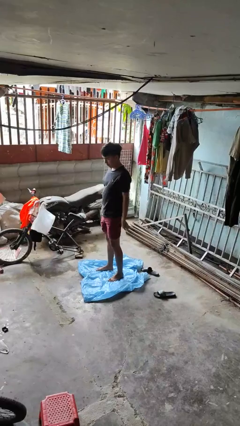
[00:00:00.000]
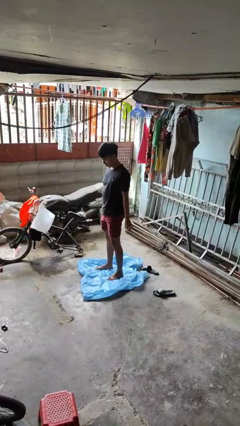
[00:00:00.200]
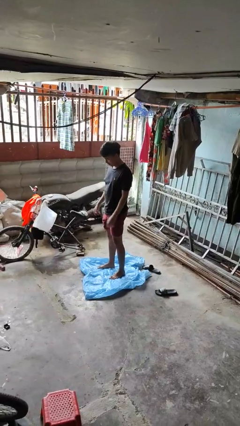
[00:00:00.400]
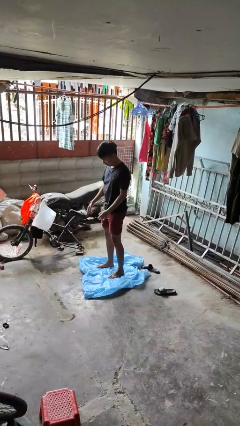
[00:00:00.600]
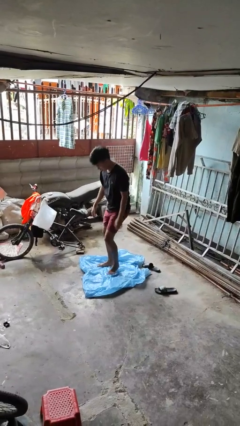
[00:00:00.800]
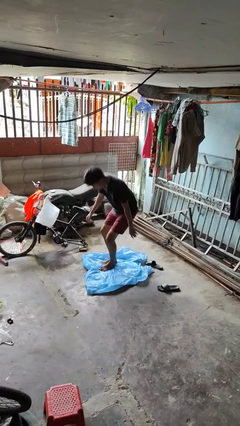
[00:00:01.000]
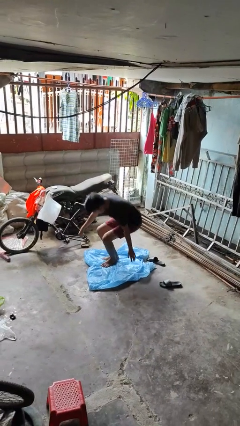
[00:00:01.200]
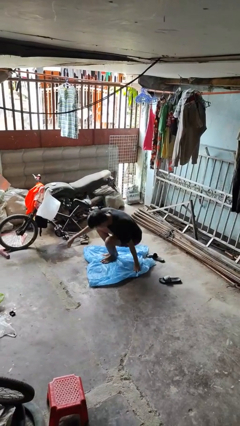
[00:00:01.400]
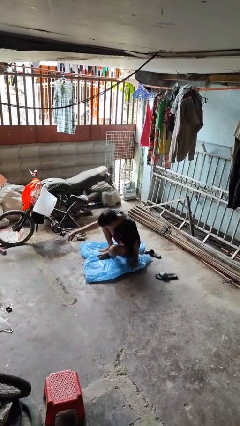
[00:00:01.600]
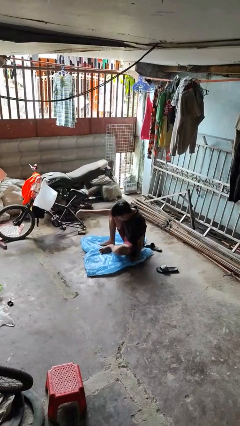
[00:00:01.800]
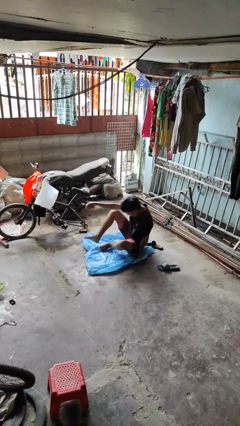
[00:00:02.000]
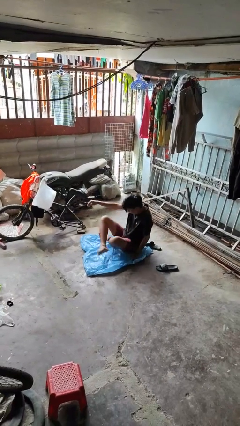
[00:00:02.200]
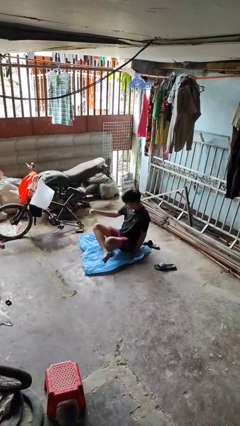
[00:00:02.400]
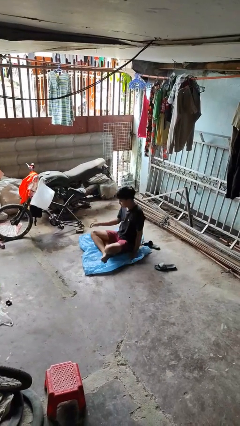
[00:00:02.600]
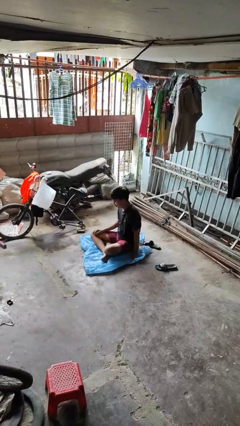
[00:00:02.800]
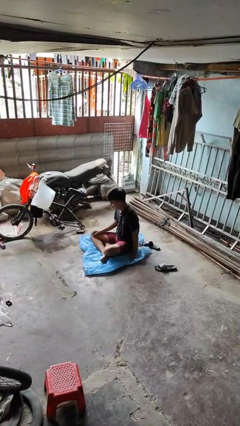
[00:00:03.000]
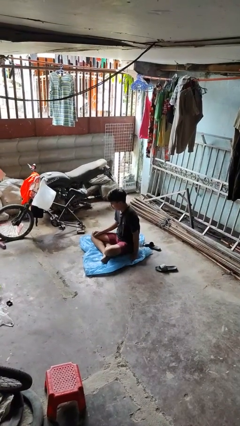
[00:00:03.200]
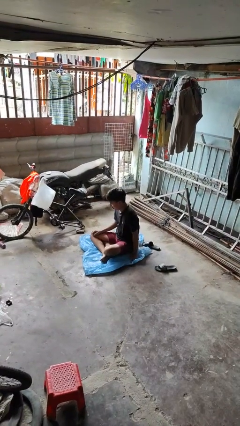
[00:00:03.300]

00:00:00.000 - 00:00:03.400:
person sits crisscross

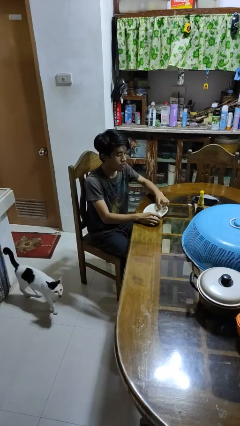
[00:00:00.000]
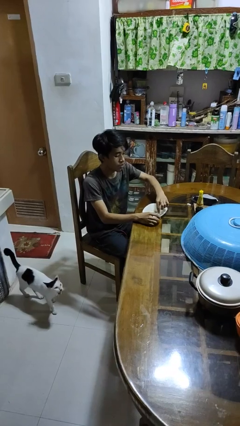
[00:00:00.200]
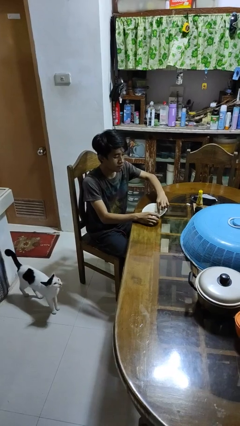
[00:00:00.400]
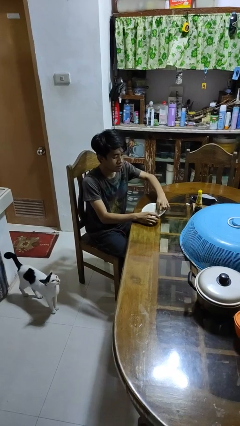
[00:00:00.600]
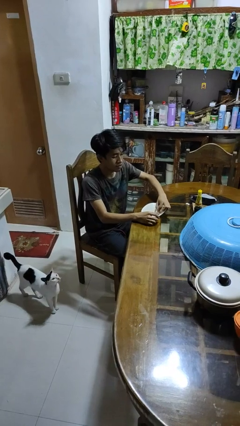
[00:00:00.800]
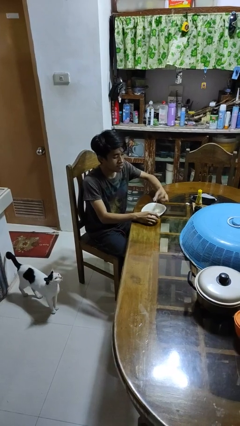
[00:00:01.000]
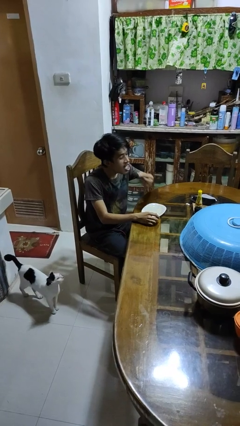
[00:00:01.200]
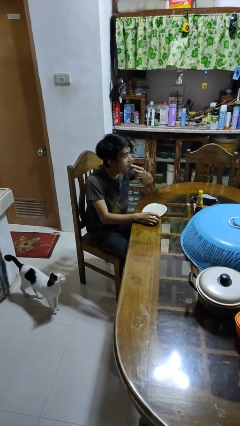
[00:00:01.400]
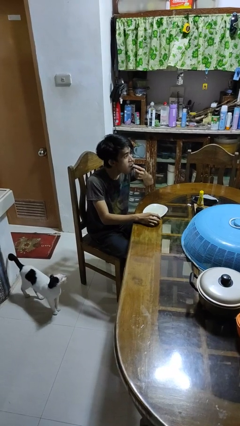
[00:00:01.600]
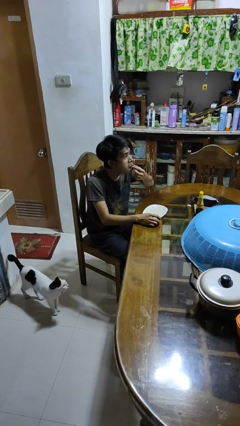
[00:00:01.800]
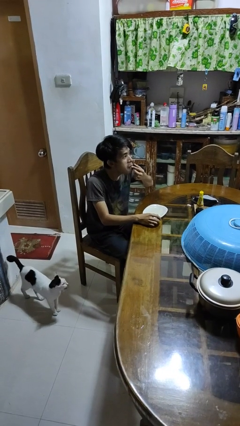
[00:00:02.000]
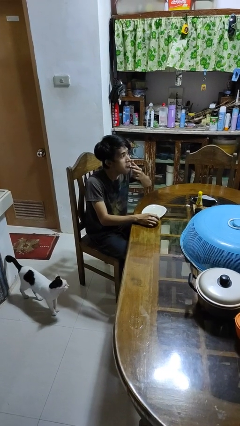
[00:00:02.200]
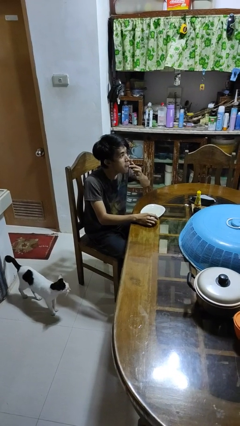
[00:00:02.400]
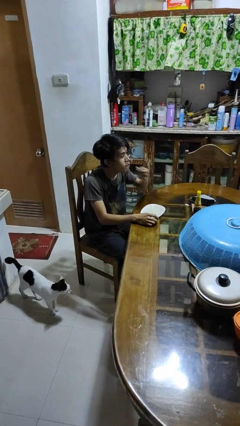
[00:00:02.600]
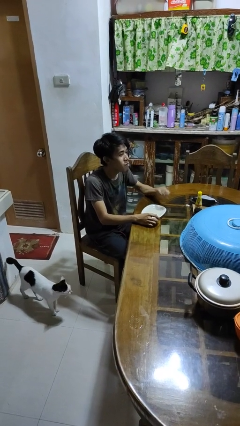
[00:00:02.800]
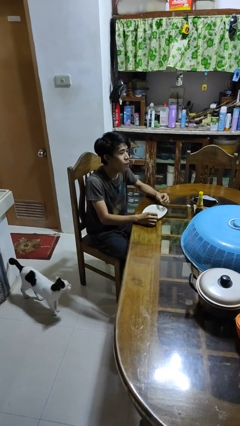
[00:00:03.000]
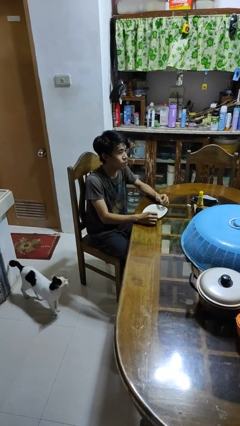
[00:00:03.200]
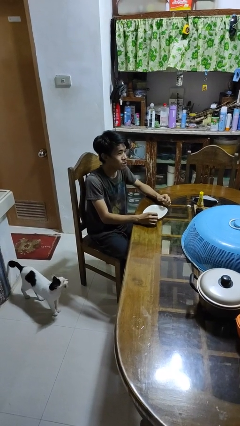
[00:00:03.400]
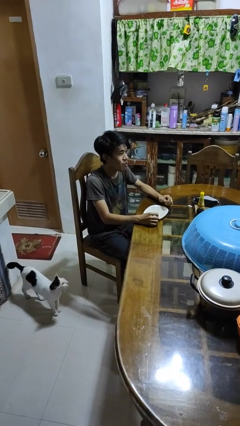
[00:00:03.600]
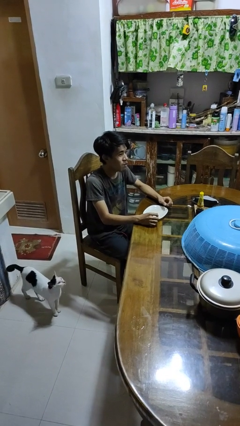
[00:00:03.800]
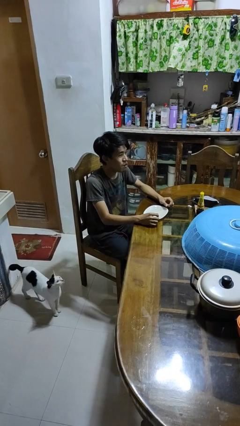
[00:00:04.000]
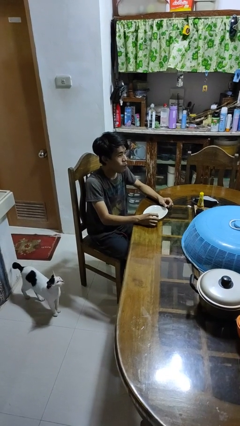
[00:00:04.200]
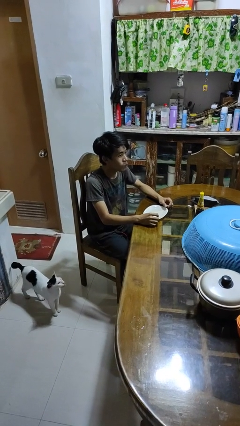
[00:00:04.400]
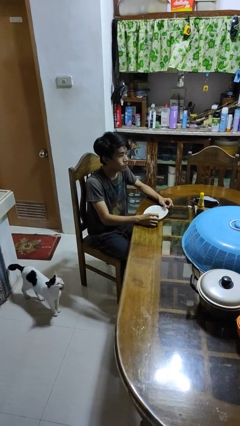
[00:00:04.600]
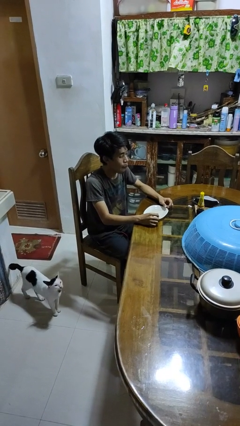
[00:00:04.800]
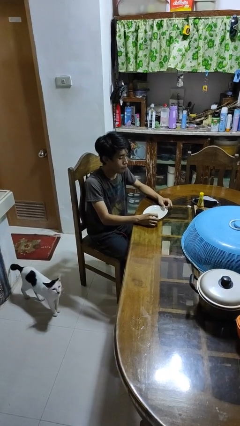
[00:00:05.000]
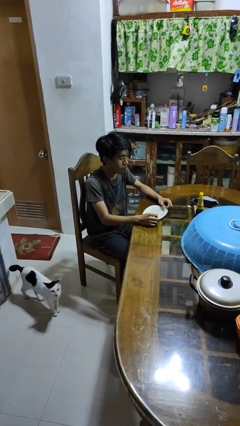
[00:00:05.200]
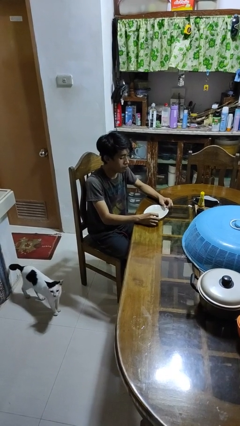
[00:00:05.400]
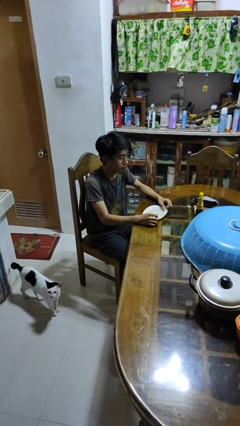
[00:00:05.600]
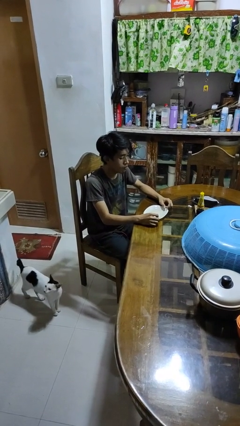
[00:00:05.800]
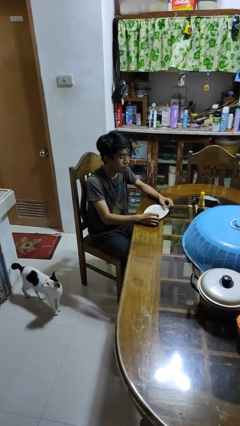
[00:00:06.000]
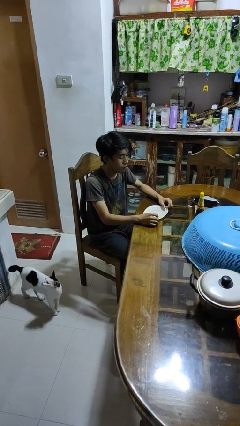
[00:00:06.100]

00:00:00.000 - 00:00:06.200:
person eats with hands

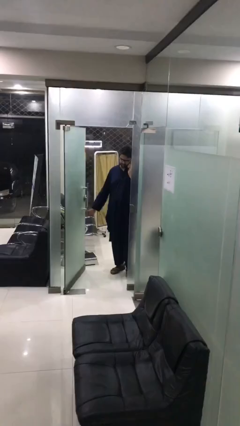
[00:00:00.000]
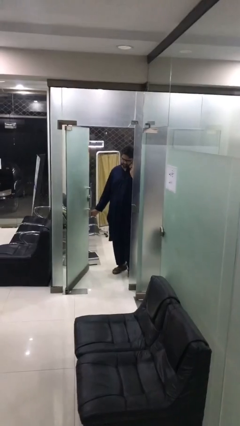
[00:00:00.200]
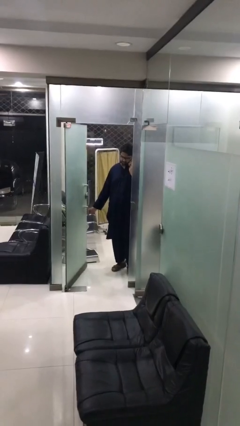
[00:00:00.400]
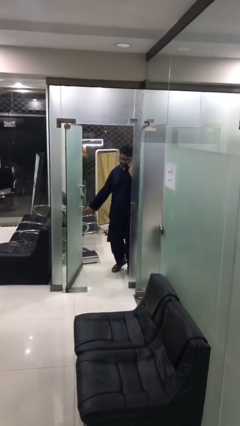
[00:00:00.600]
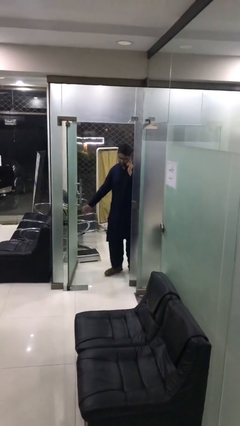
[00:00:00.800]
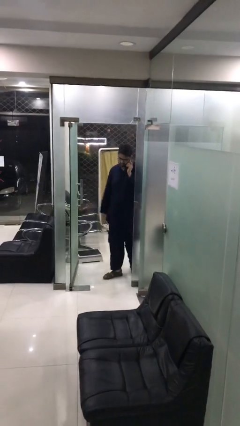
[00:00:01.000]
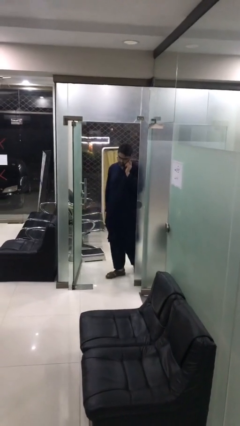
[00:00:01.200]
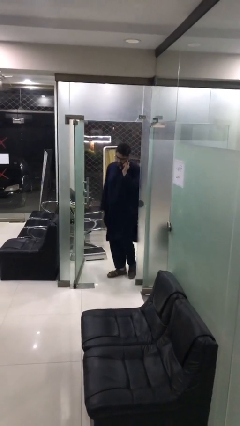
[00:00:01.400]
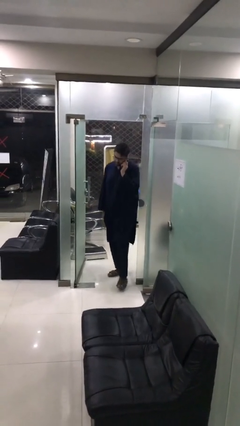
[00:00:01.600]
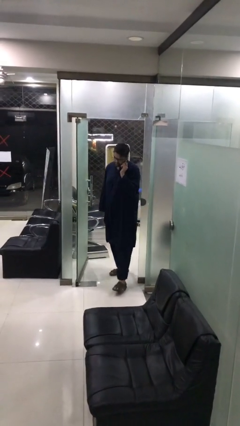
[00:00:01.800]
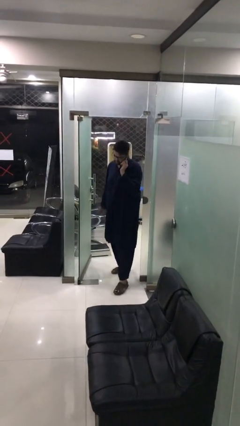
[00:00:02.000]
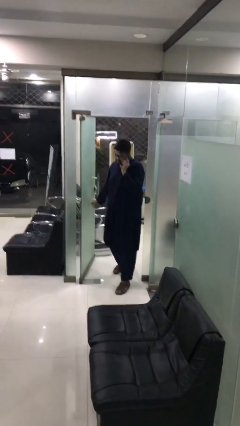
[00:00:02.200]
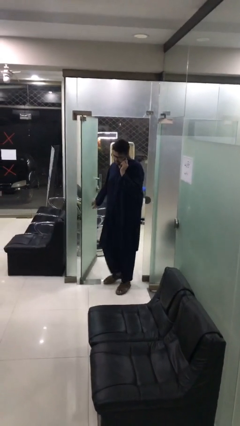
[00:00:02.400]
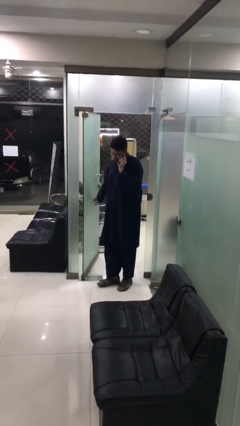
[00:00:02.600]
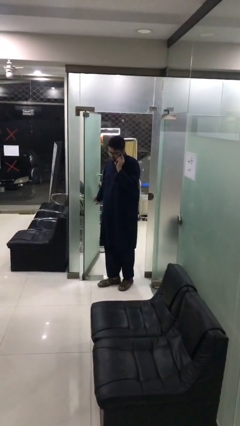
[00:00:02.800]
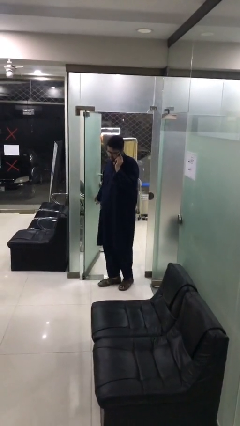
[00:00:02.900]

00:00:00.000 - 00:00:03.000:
person enters scene through structure

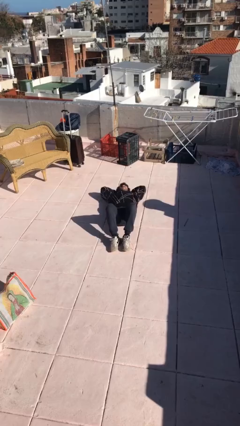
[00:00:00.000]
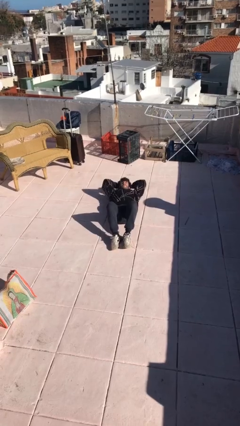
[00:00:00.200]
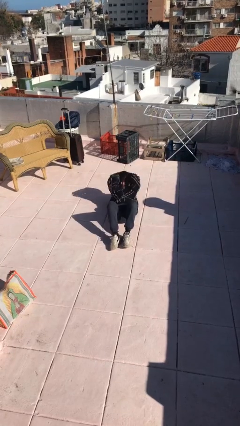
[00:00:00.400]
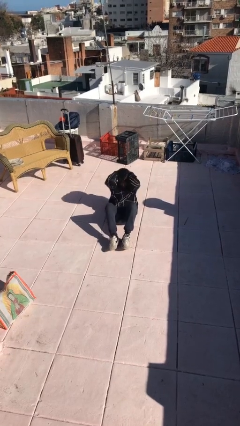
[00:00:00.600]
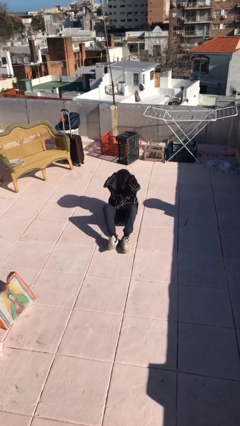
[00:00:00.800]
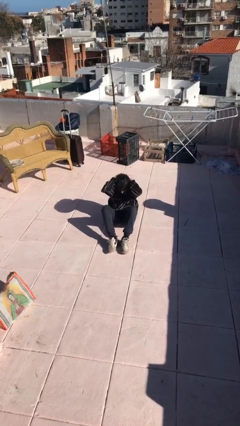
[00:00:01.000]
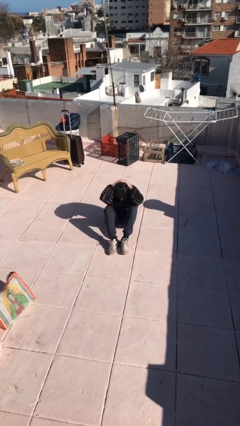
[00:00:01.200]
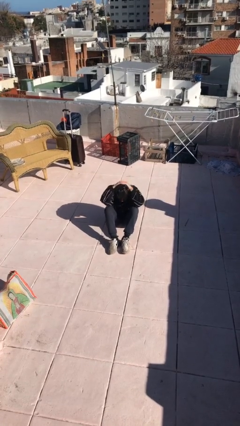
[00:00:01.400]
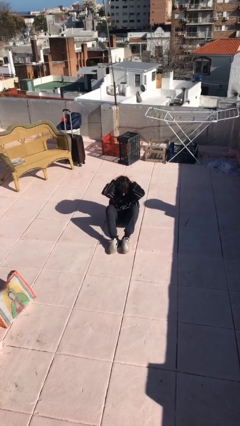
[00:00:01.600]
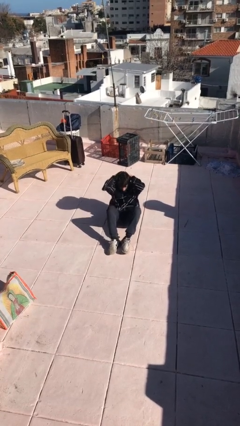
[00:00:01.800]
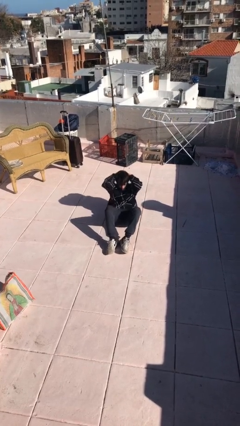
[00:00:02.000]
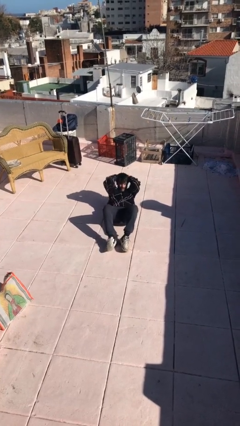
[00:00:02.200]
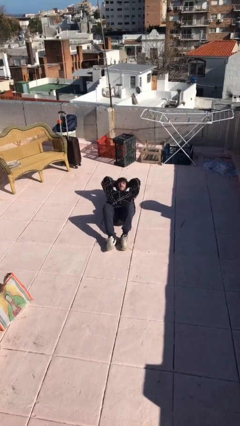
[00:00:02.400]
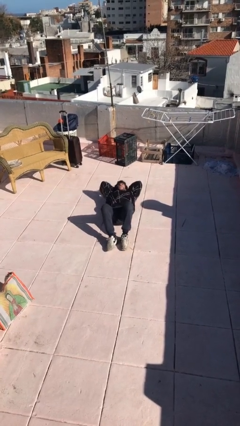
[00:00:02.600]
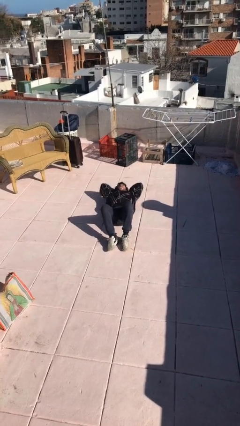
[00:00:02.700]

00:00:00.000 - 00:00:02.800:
person exercises with situp

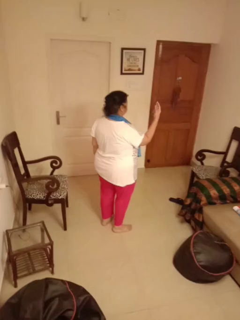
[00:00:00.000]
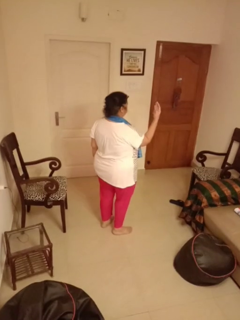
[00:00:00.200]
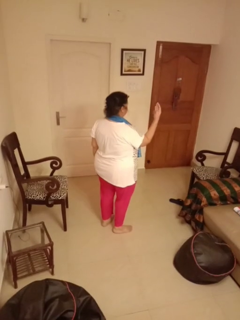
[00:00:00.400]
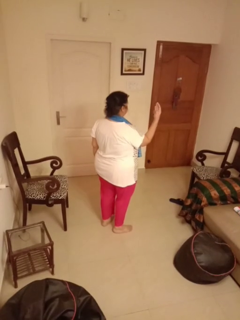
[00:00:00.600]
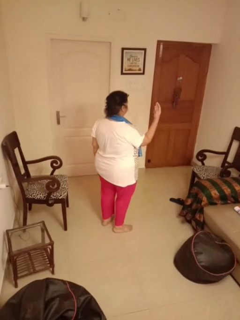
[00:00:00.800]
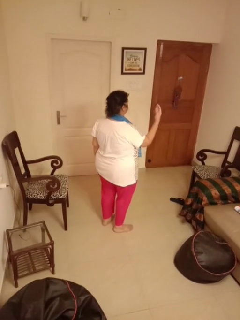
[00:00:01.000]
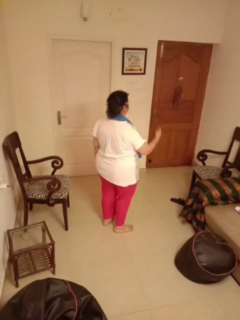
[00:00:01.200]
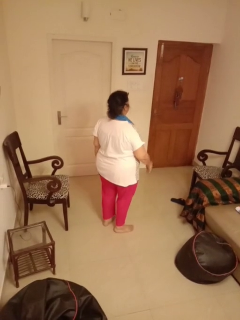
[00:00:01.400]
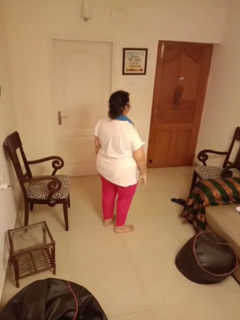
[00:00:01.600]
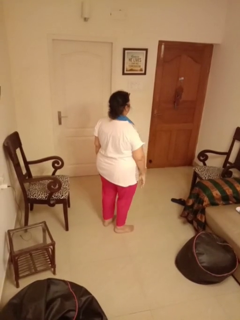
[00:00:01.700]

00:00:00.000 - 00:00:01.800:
person gestures number four

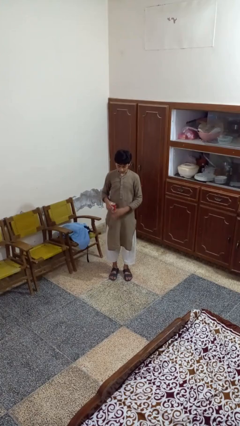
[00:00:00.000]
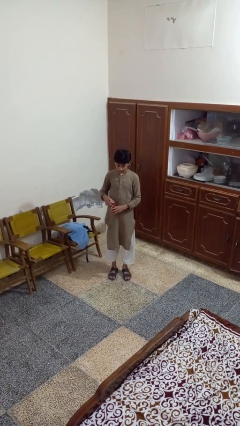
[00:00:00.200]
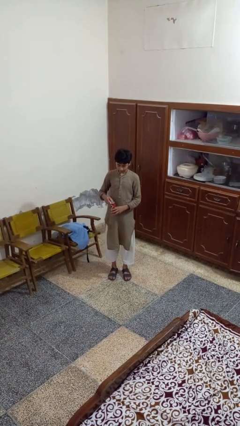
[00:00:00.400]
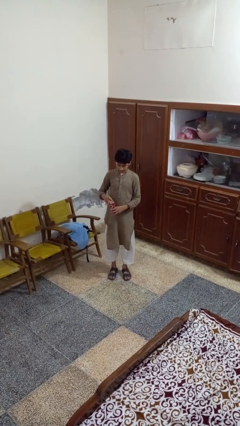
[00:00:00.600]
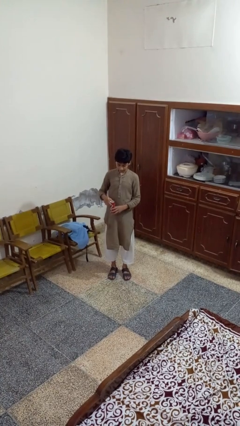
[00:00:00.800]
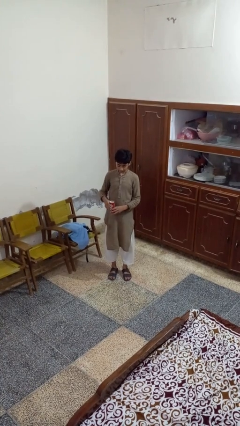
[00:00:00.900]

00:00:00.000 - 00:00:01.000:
person opens beverage can
